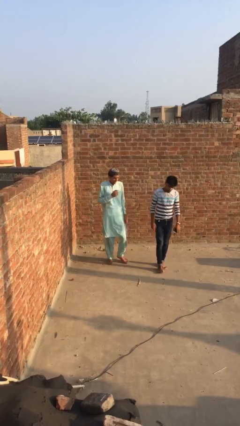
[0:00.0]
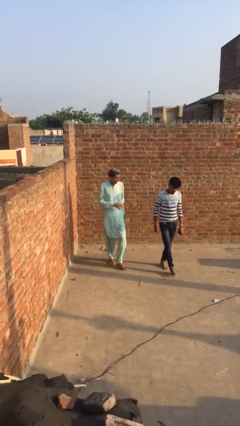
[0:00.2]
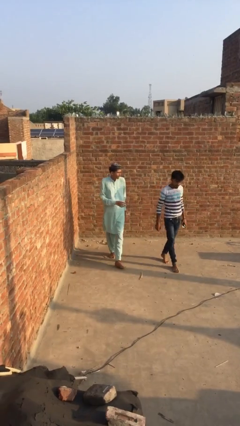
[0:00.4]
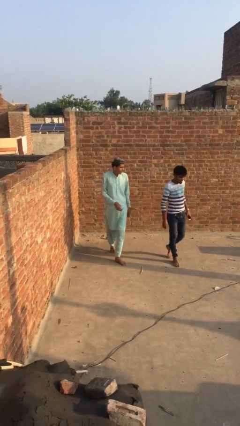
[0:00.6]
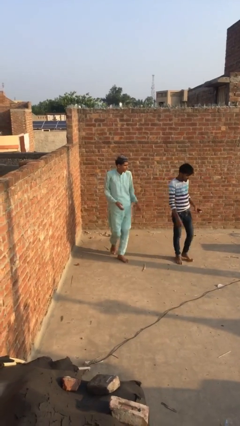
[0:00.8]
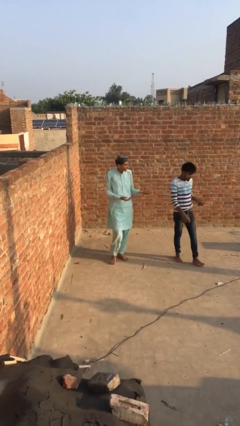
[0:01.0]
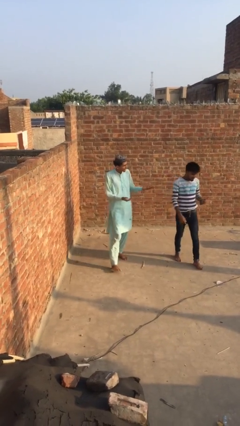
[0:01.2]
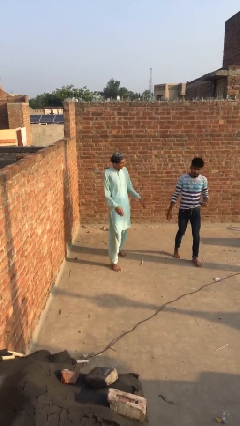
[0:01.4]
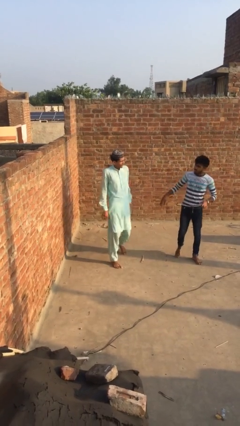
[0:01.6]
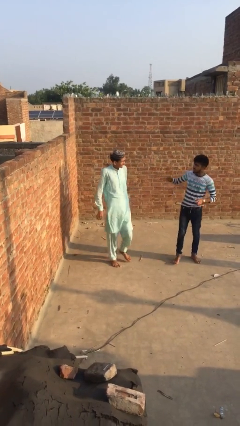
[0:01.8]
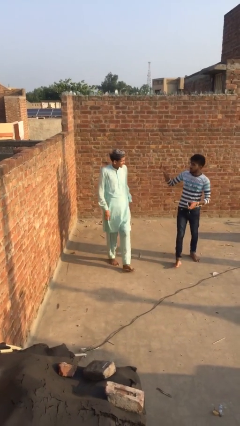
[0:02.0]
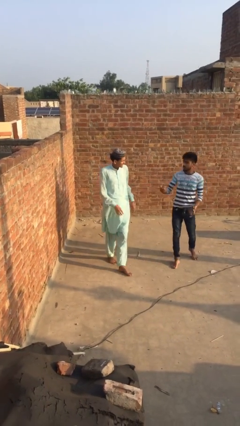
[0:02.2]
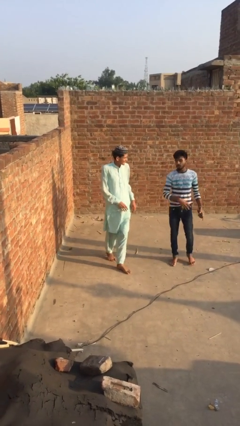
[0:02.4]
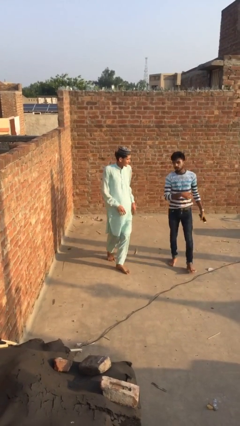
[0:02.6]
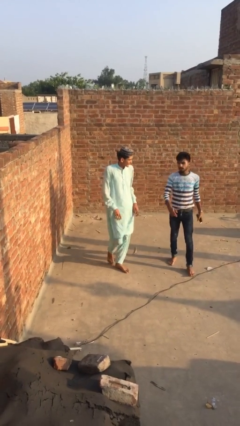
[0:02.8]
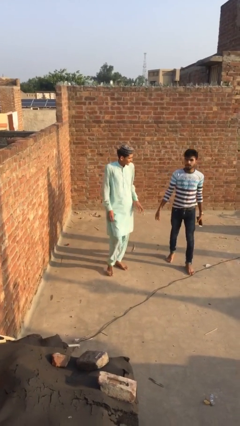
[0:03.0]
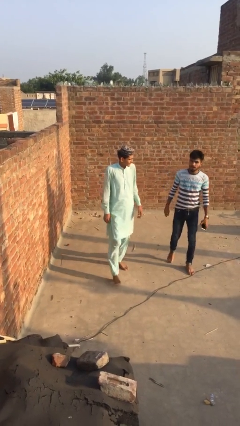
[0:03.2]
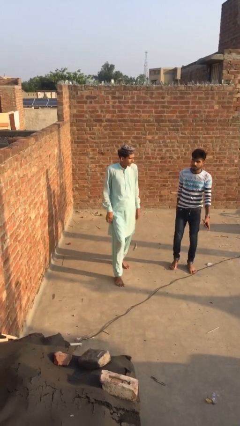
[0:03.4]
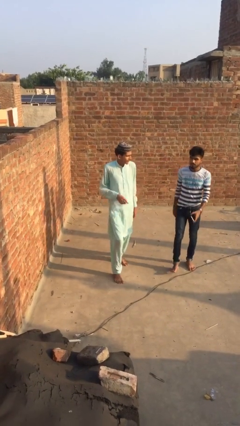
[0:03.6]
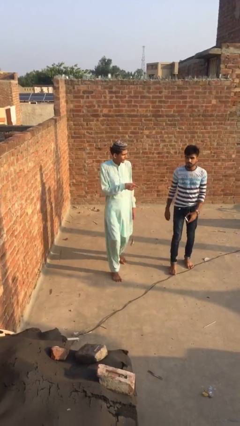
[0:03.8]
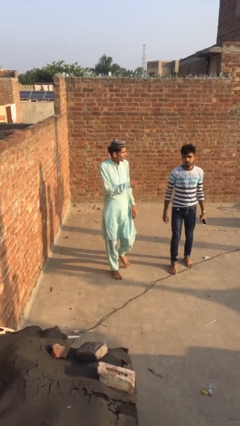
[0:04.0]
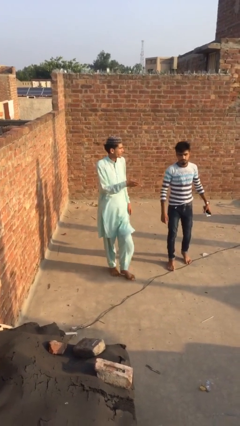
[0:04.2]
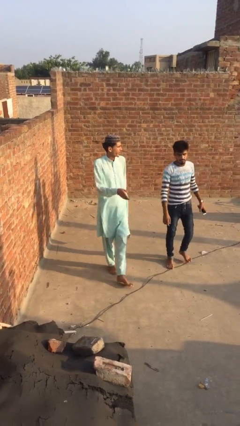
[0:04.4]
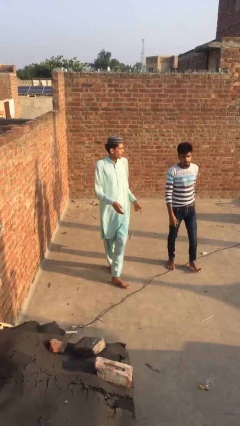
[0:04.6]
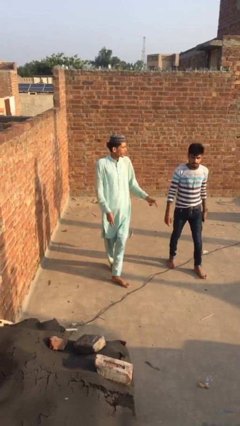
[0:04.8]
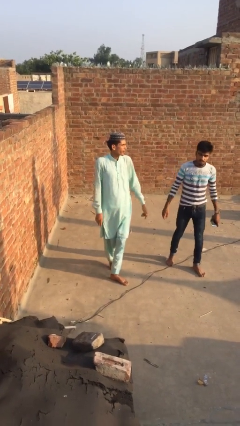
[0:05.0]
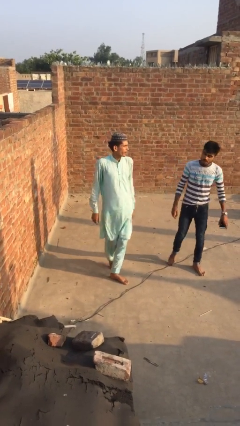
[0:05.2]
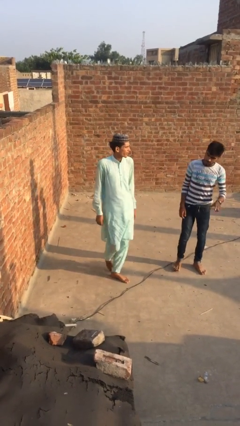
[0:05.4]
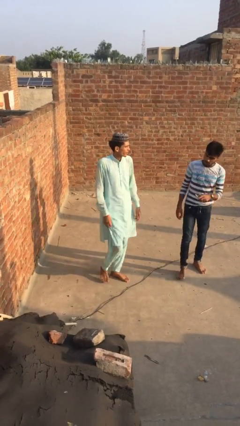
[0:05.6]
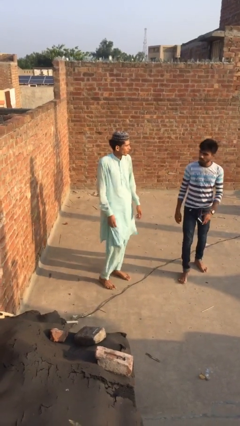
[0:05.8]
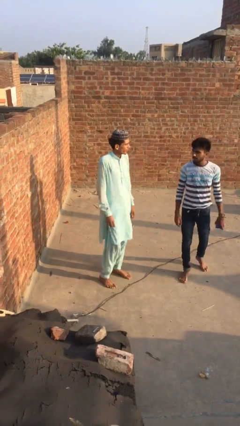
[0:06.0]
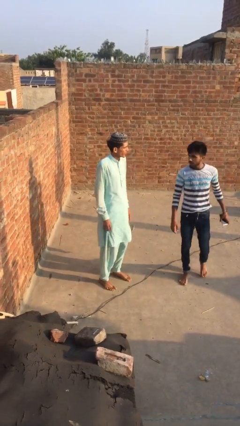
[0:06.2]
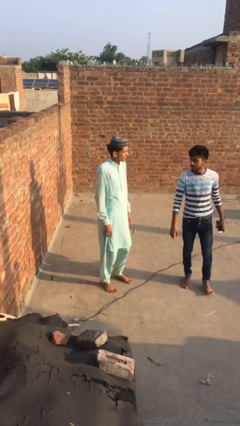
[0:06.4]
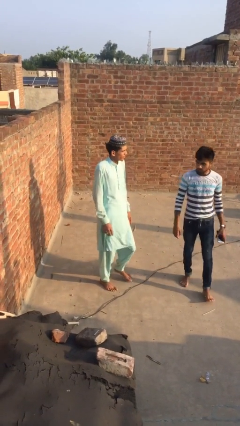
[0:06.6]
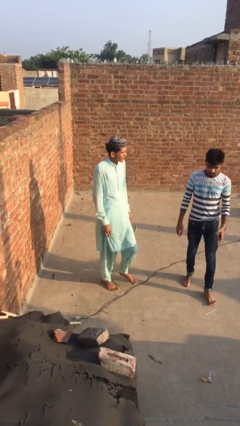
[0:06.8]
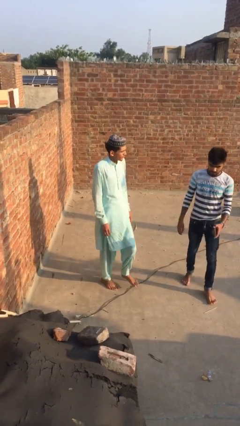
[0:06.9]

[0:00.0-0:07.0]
person talks to person

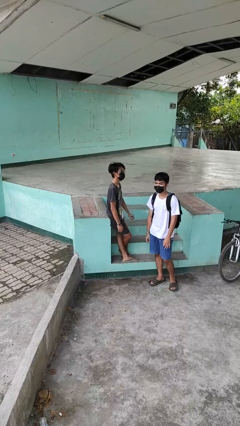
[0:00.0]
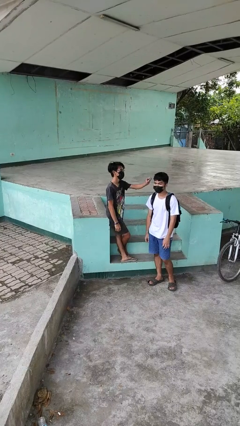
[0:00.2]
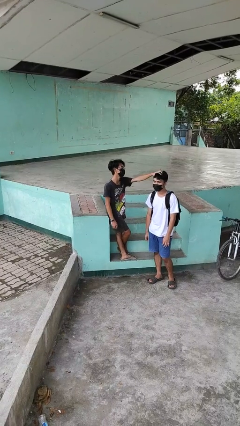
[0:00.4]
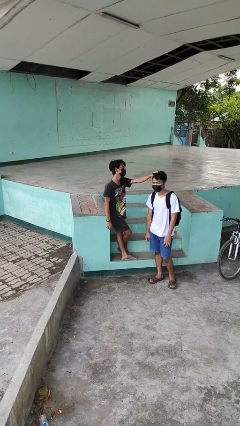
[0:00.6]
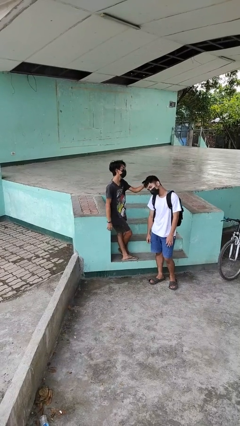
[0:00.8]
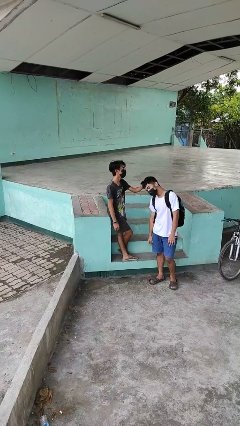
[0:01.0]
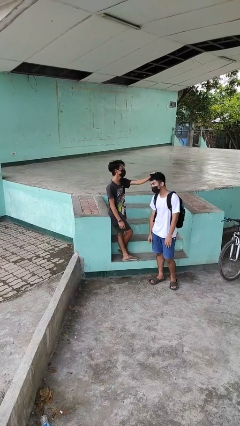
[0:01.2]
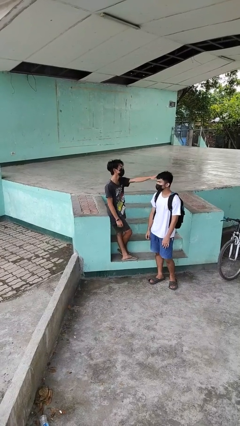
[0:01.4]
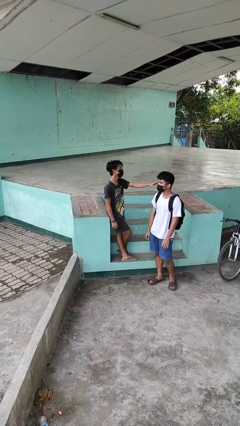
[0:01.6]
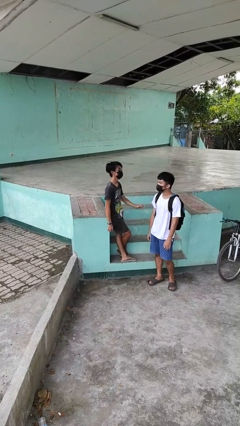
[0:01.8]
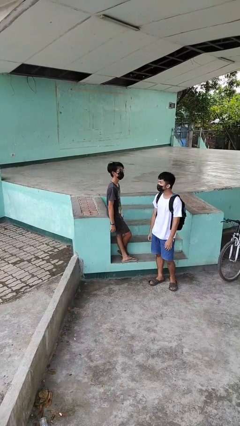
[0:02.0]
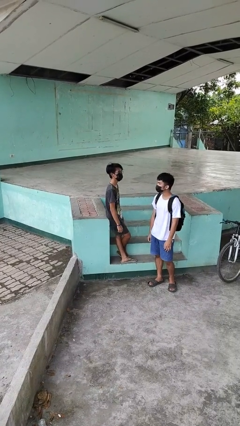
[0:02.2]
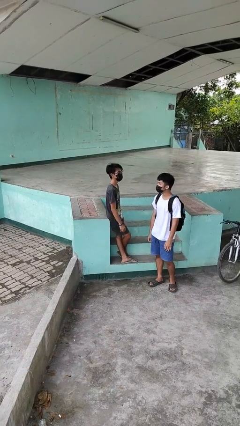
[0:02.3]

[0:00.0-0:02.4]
person grabs person by hair

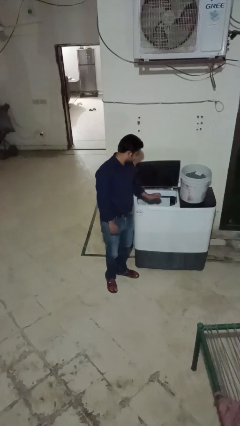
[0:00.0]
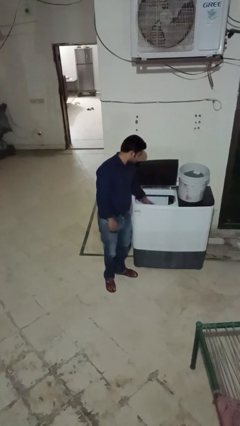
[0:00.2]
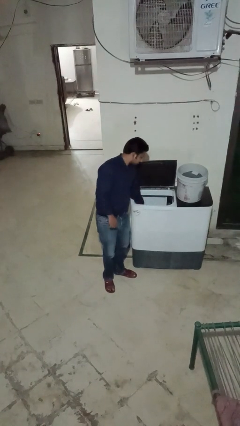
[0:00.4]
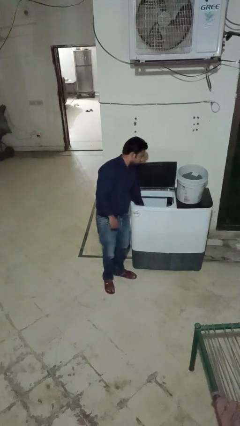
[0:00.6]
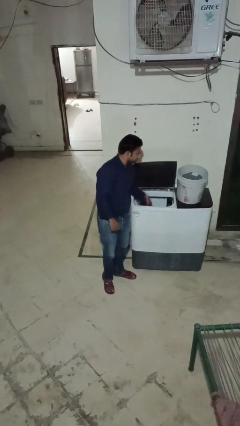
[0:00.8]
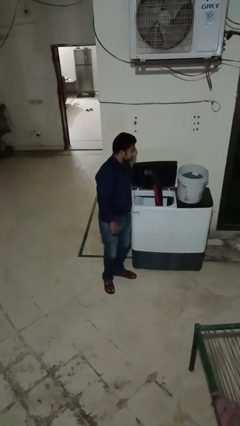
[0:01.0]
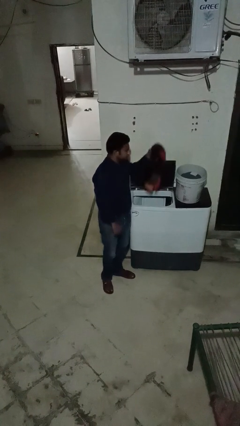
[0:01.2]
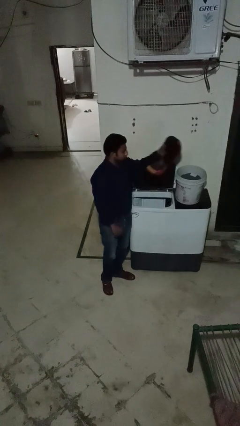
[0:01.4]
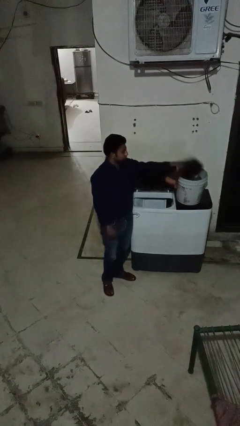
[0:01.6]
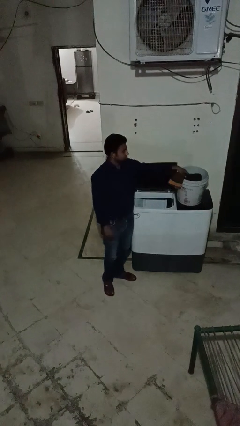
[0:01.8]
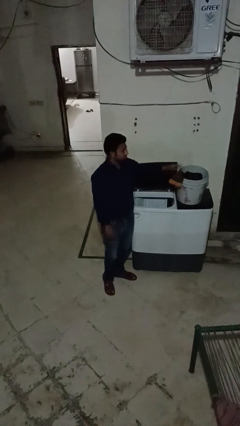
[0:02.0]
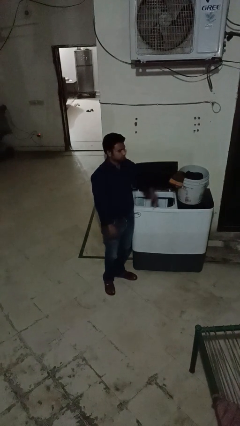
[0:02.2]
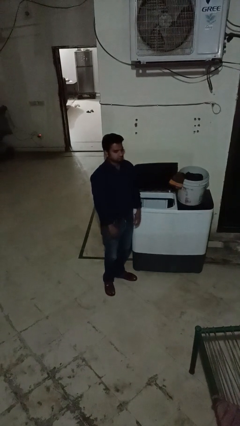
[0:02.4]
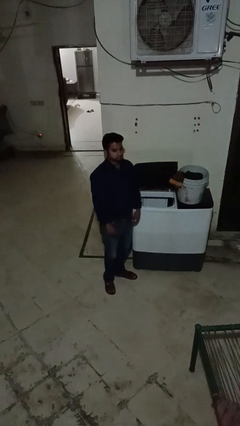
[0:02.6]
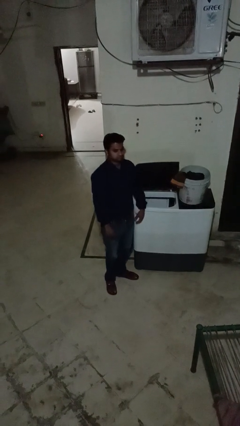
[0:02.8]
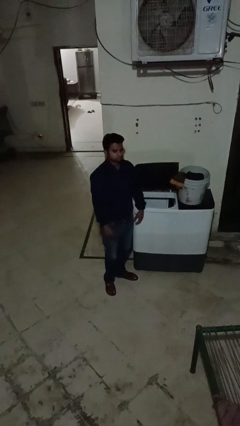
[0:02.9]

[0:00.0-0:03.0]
person unloads clotheswasher

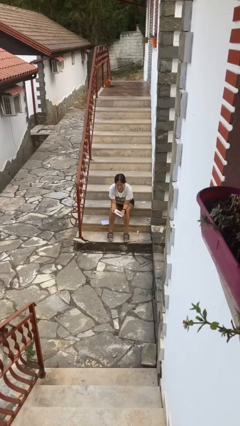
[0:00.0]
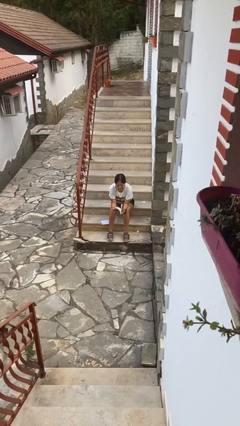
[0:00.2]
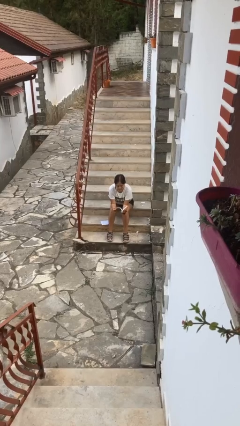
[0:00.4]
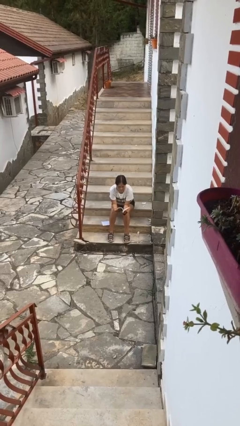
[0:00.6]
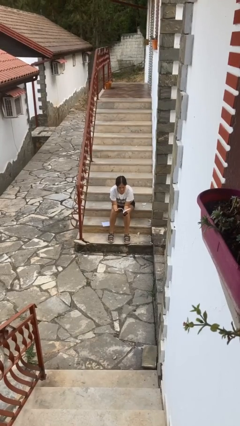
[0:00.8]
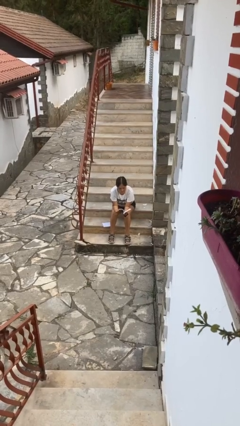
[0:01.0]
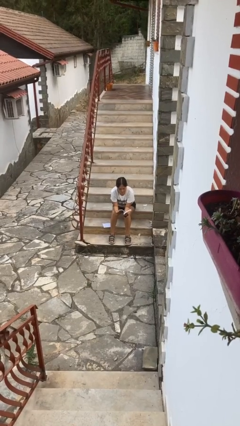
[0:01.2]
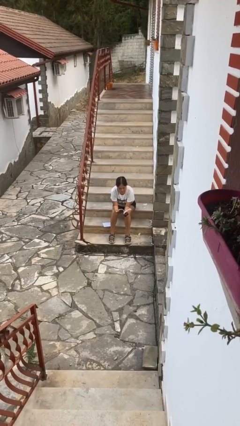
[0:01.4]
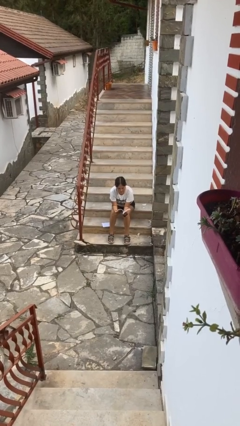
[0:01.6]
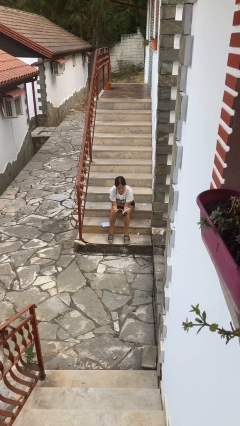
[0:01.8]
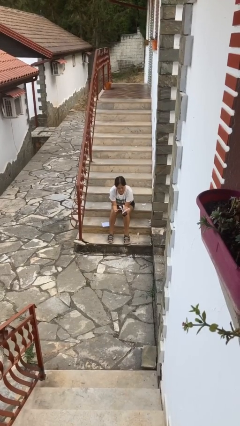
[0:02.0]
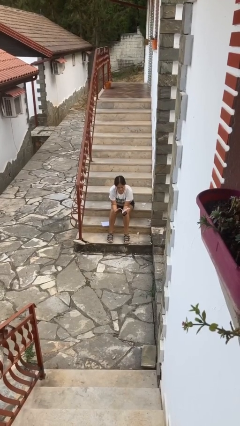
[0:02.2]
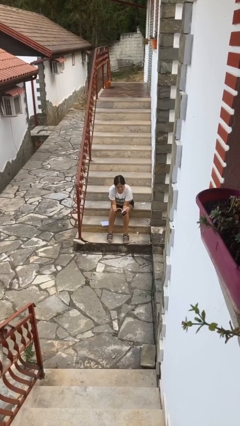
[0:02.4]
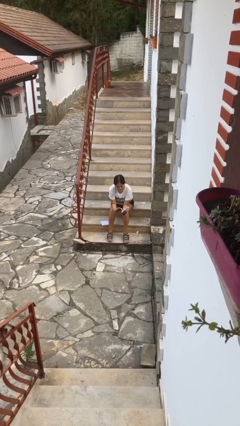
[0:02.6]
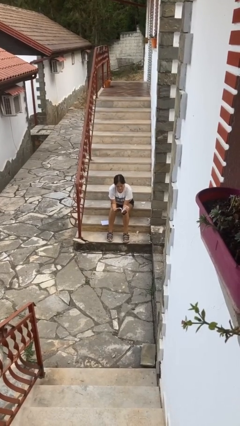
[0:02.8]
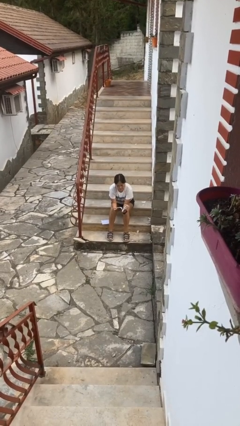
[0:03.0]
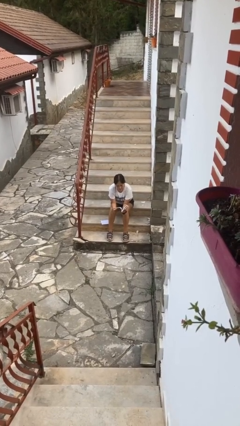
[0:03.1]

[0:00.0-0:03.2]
person reads book

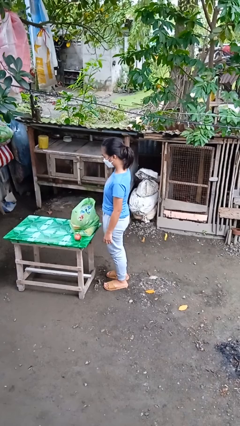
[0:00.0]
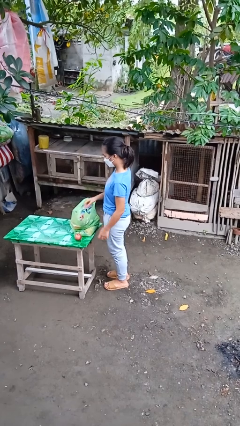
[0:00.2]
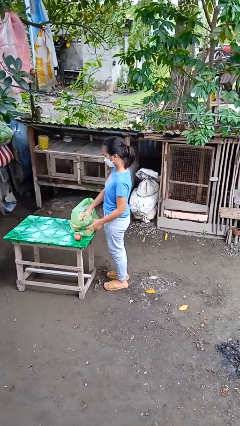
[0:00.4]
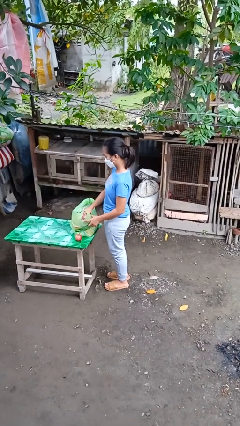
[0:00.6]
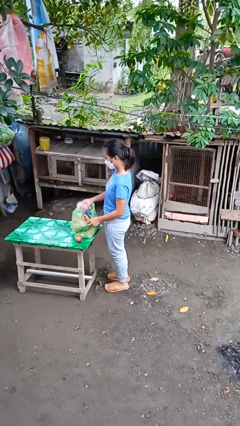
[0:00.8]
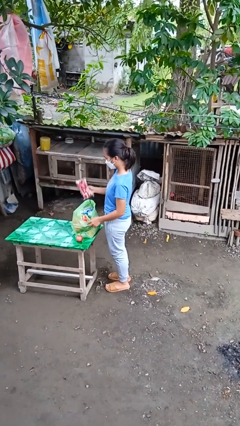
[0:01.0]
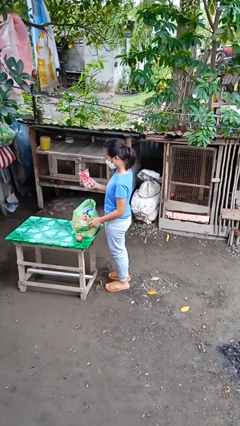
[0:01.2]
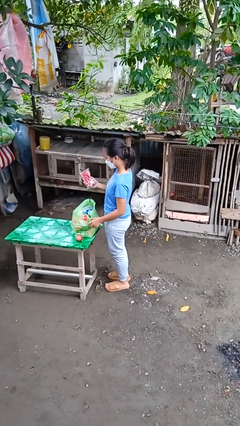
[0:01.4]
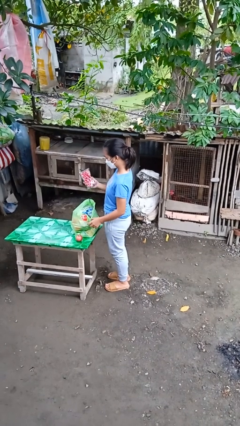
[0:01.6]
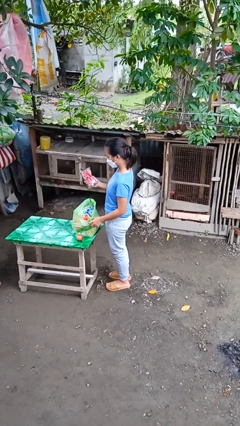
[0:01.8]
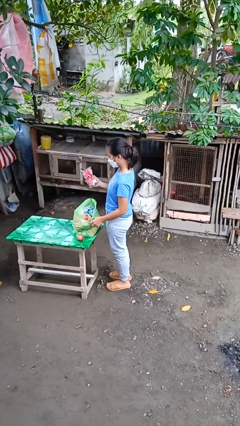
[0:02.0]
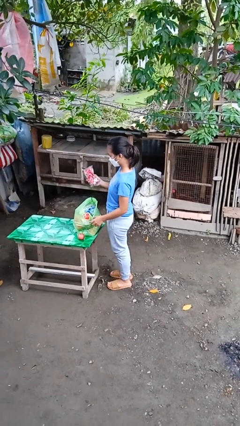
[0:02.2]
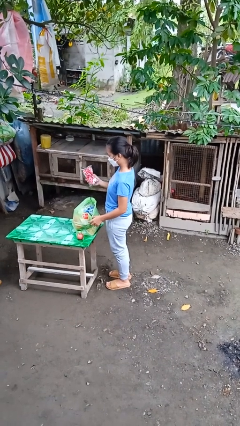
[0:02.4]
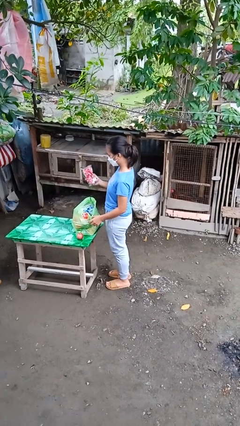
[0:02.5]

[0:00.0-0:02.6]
person takes object from bag
